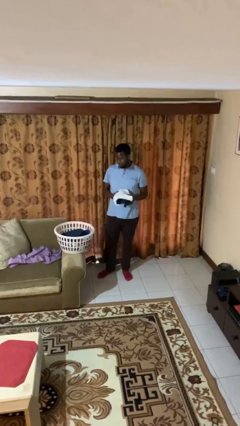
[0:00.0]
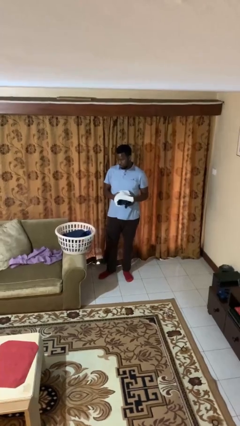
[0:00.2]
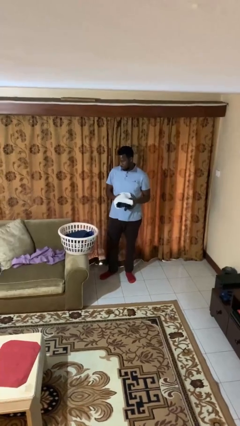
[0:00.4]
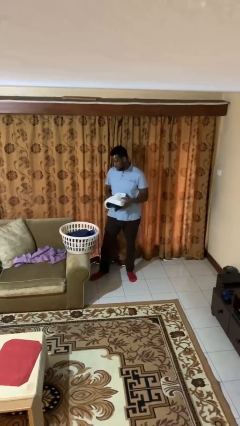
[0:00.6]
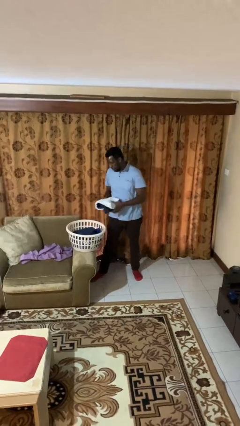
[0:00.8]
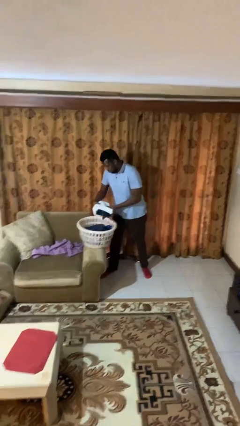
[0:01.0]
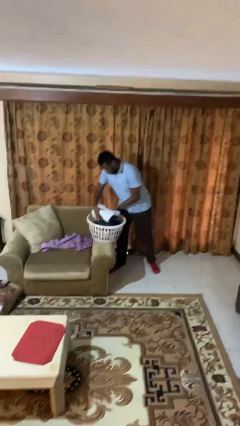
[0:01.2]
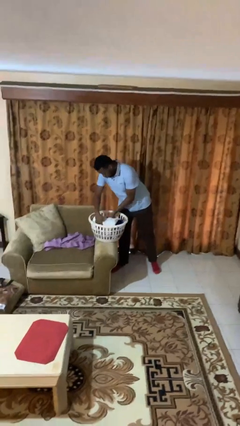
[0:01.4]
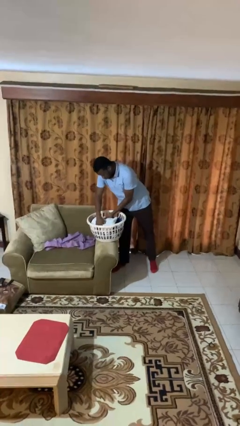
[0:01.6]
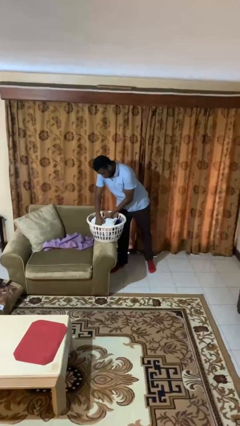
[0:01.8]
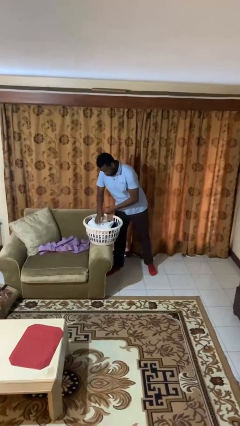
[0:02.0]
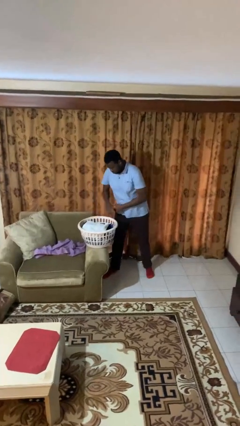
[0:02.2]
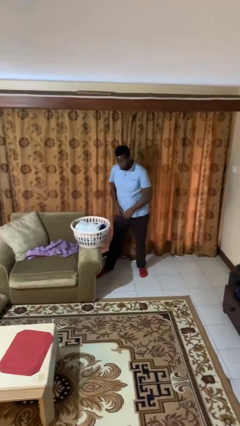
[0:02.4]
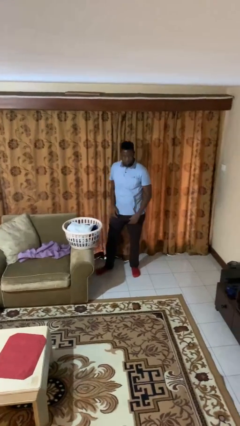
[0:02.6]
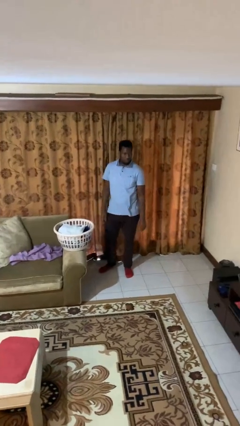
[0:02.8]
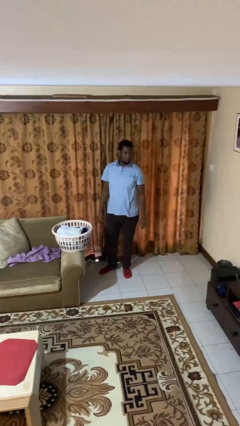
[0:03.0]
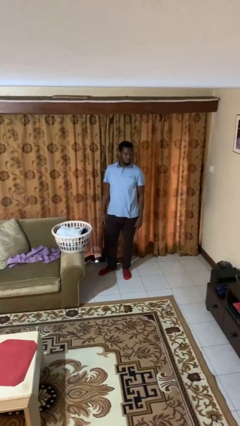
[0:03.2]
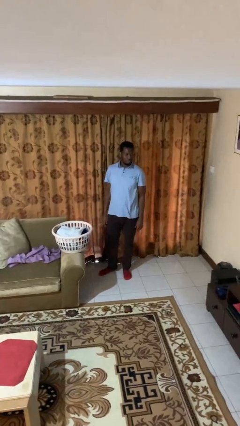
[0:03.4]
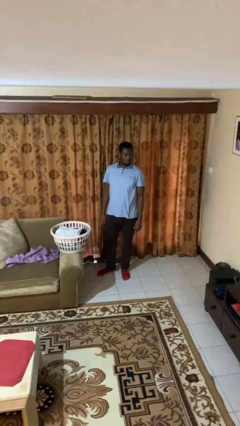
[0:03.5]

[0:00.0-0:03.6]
person puts object into basket

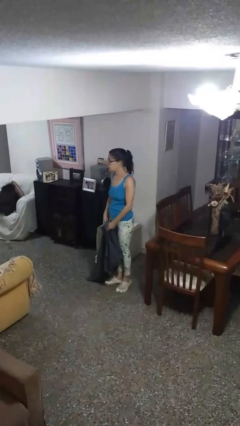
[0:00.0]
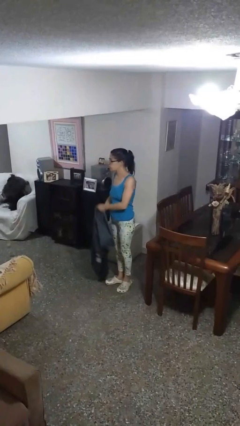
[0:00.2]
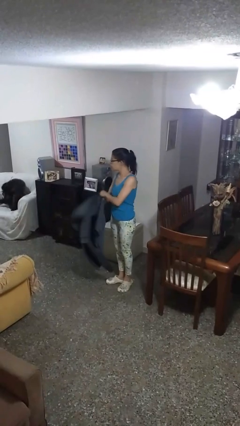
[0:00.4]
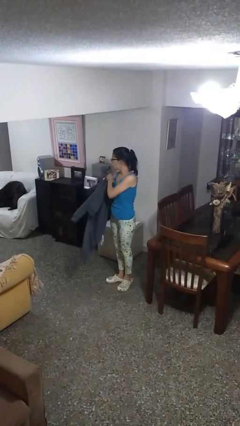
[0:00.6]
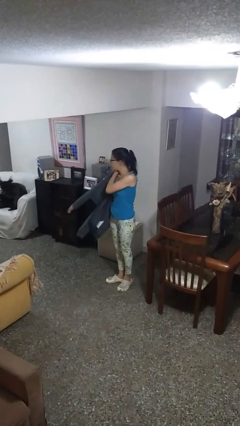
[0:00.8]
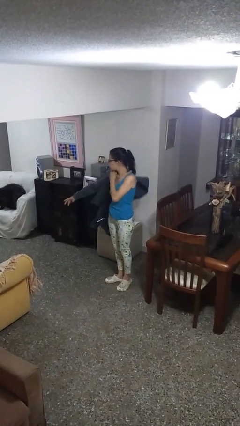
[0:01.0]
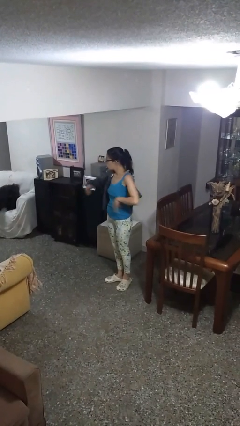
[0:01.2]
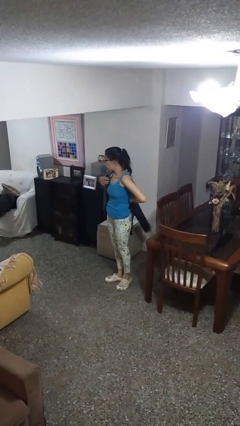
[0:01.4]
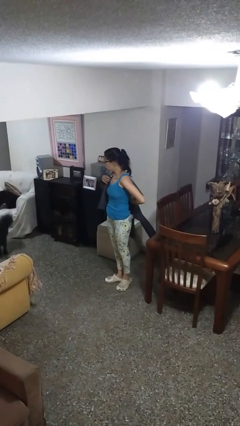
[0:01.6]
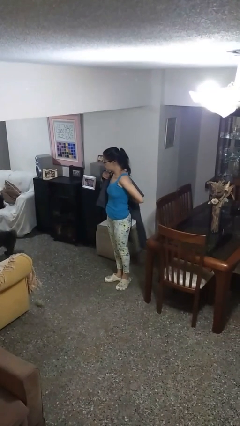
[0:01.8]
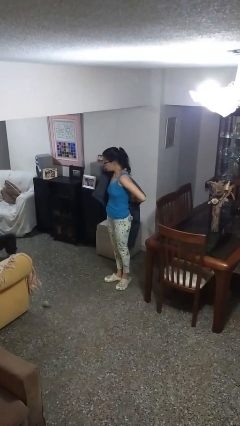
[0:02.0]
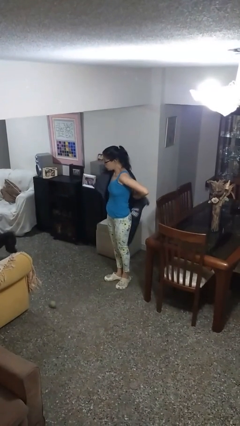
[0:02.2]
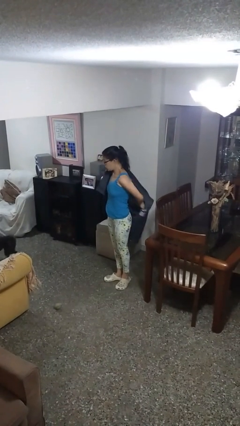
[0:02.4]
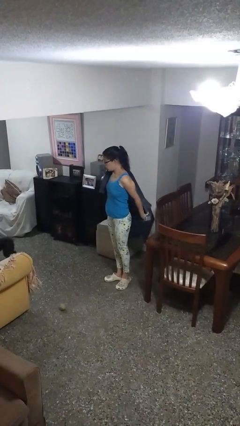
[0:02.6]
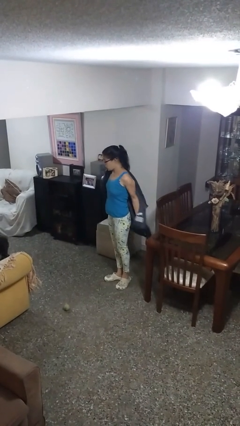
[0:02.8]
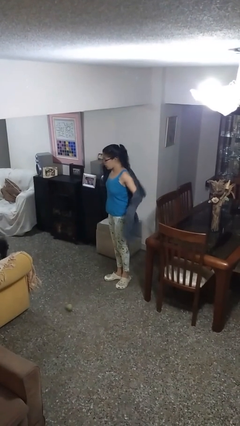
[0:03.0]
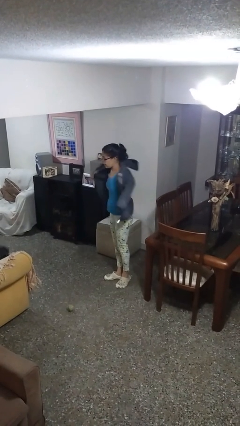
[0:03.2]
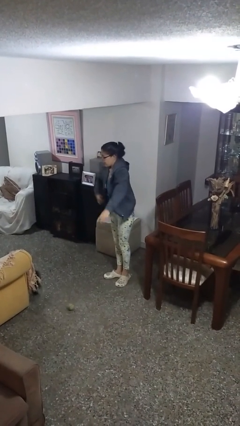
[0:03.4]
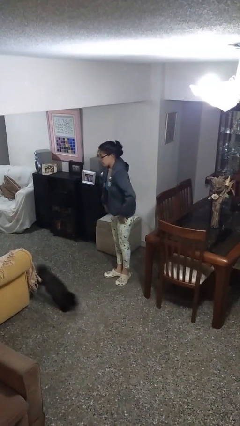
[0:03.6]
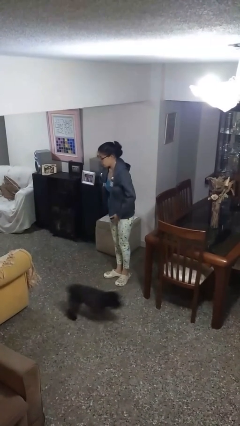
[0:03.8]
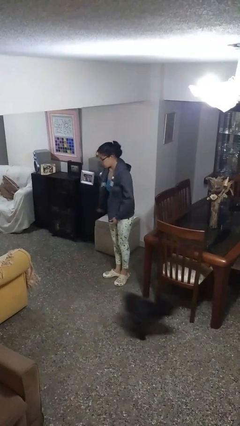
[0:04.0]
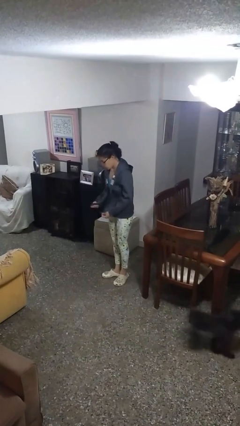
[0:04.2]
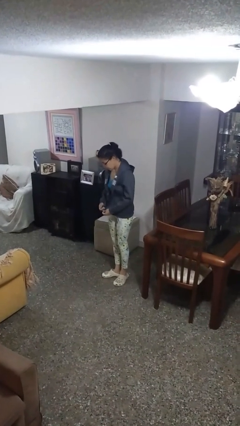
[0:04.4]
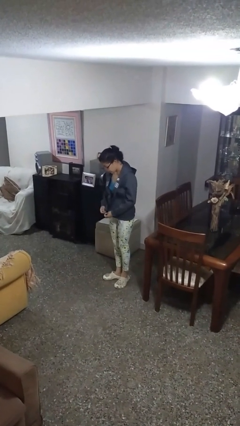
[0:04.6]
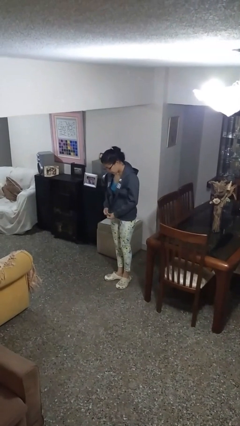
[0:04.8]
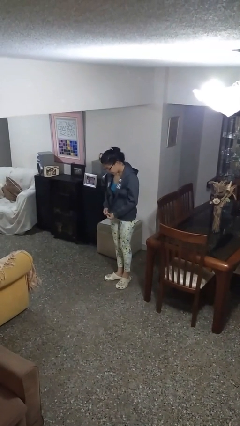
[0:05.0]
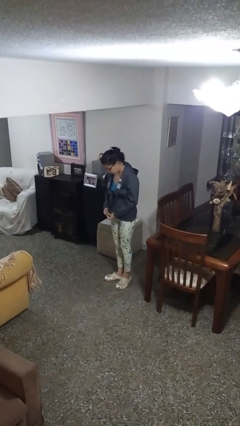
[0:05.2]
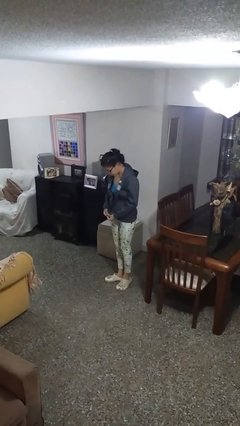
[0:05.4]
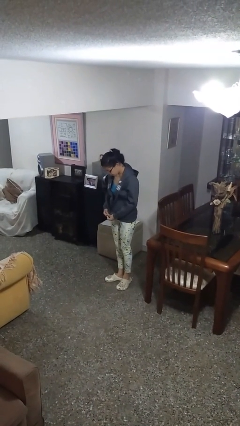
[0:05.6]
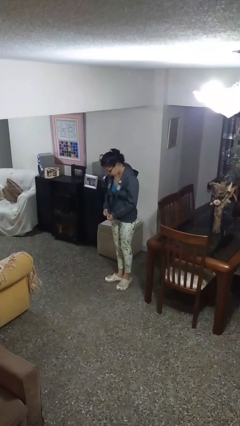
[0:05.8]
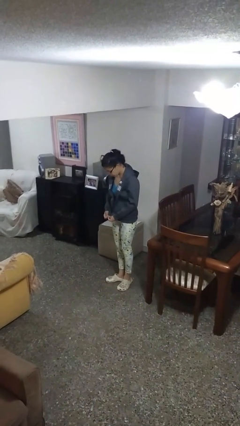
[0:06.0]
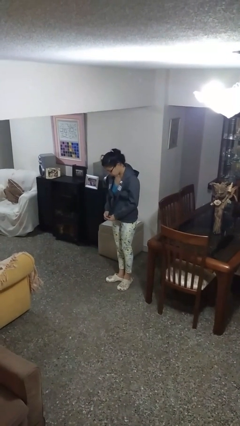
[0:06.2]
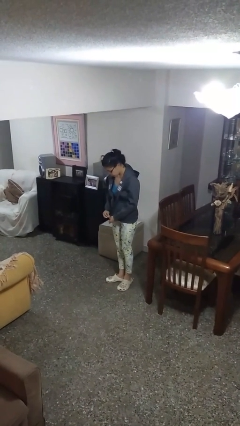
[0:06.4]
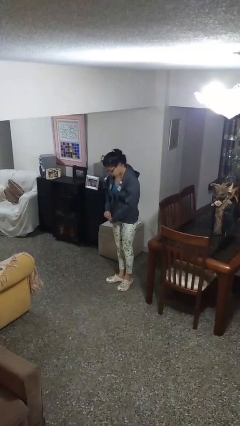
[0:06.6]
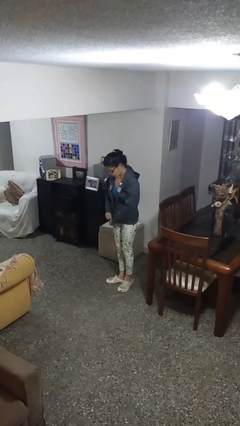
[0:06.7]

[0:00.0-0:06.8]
person puts on jacket

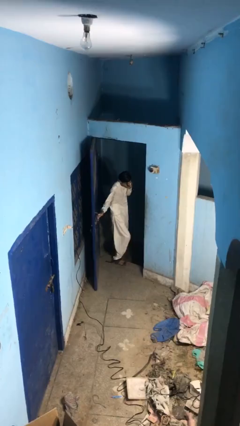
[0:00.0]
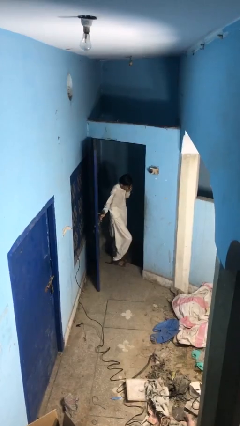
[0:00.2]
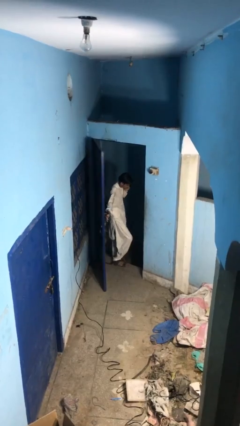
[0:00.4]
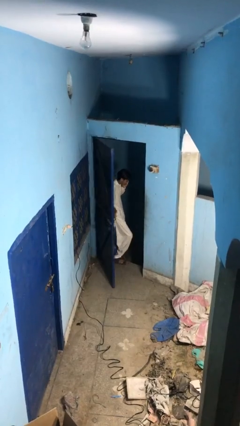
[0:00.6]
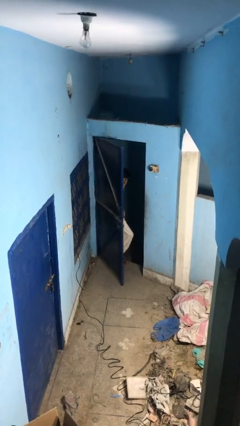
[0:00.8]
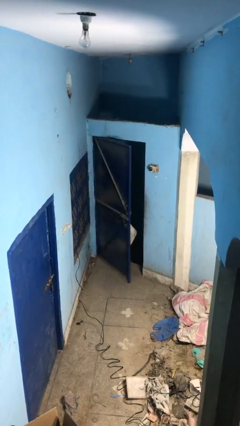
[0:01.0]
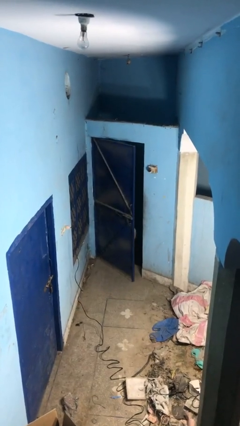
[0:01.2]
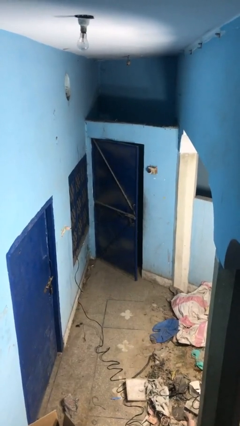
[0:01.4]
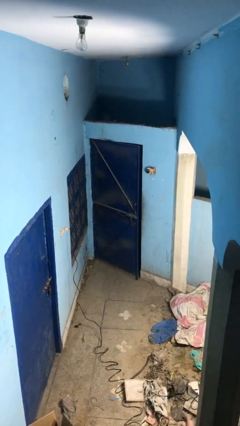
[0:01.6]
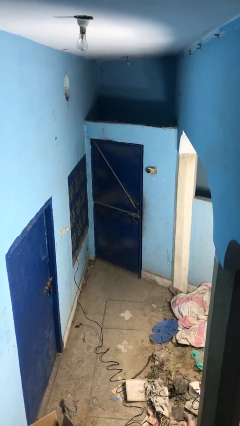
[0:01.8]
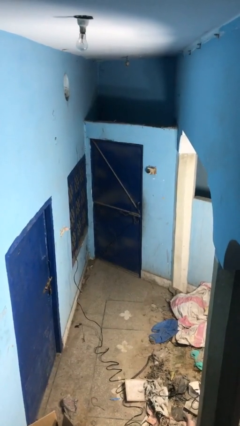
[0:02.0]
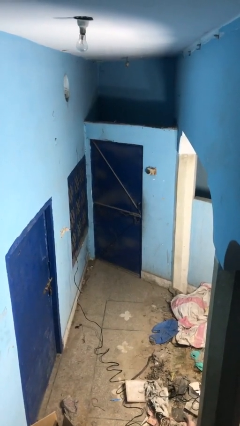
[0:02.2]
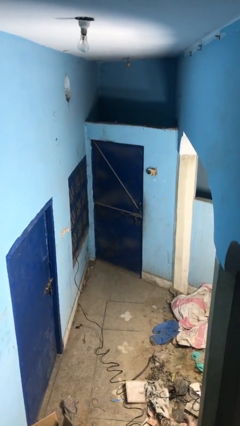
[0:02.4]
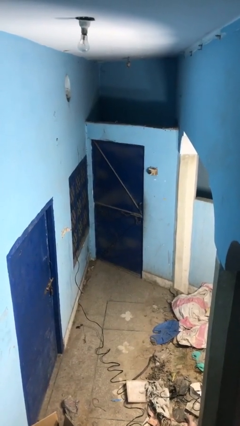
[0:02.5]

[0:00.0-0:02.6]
person closes facility door

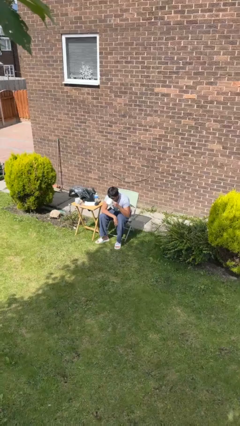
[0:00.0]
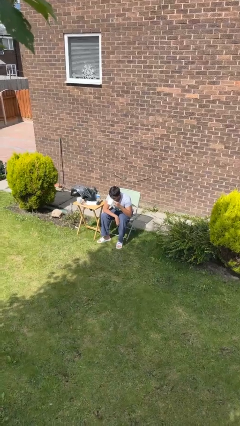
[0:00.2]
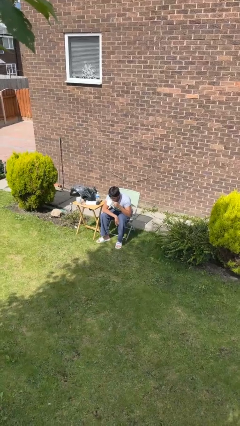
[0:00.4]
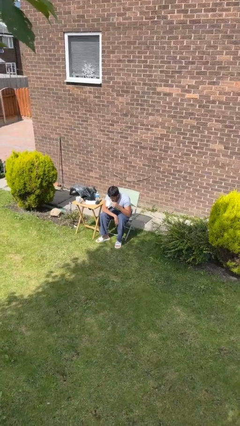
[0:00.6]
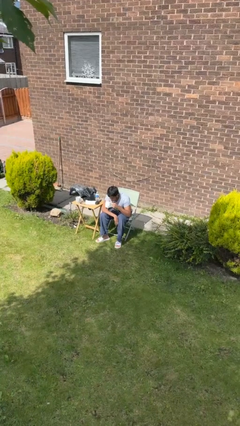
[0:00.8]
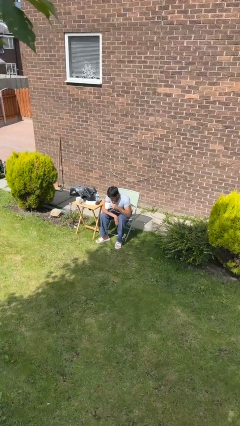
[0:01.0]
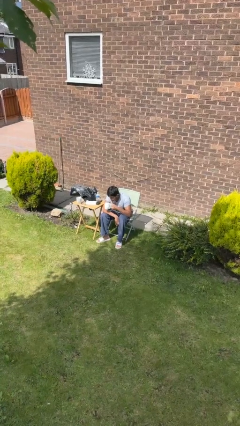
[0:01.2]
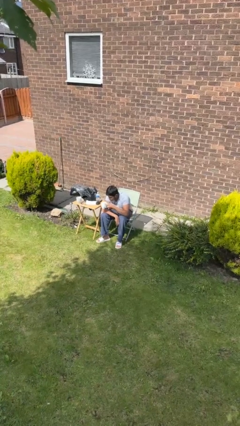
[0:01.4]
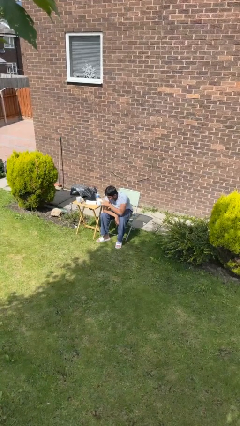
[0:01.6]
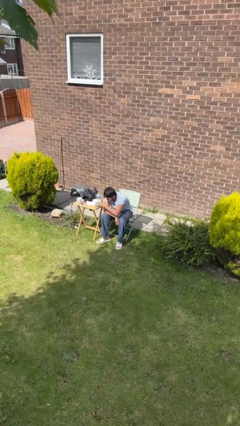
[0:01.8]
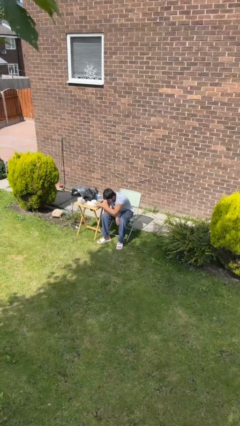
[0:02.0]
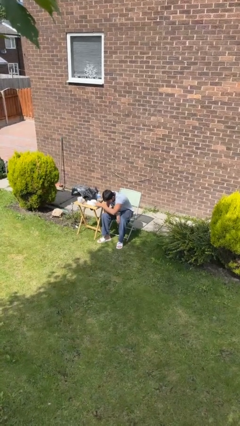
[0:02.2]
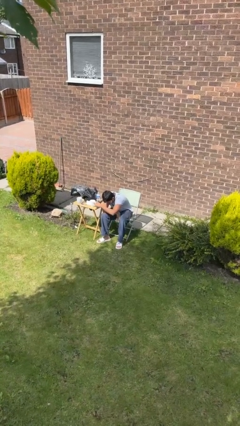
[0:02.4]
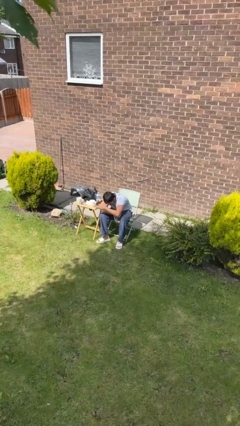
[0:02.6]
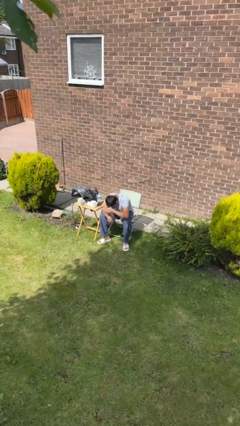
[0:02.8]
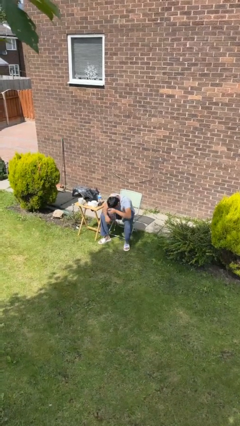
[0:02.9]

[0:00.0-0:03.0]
person puts down object on table

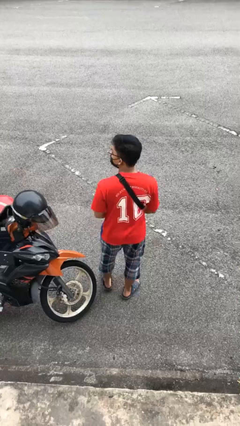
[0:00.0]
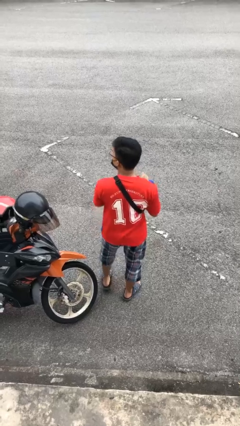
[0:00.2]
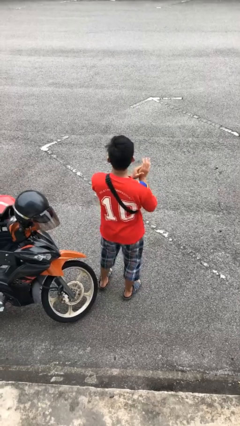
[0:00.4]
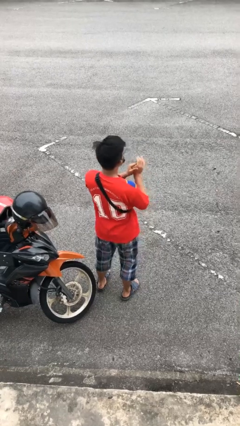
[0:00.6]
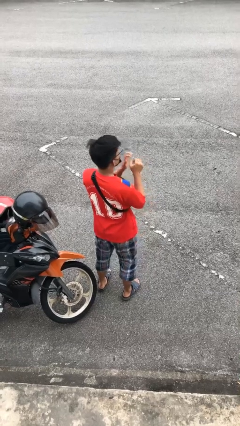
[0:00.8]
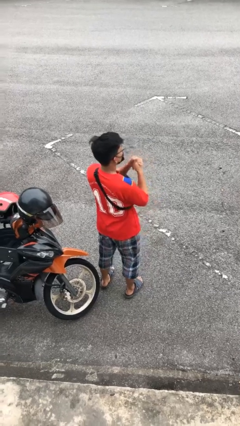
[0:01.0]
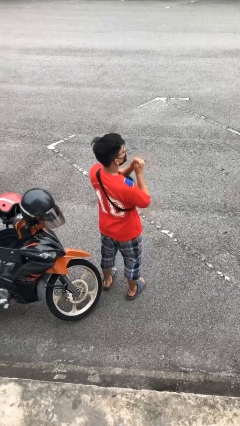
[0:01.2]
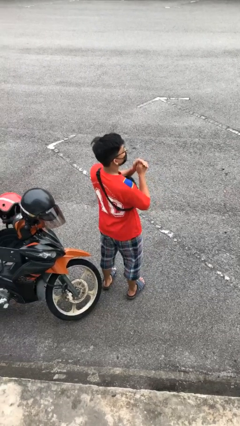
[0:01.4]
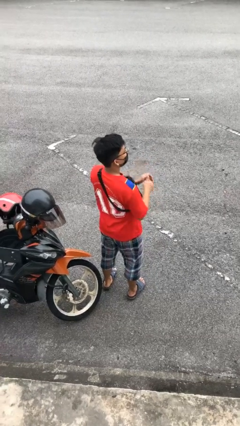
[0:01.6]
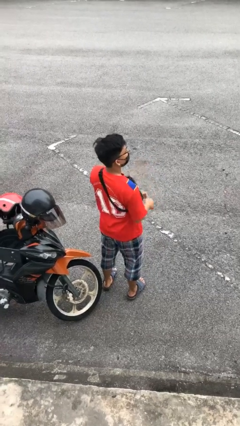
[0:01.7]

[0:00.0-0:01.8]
person cracks knuckles
